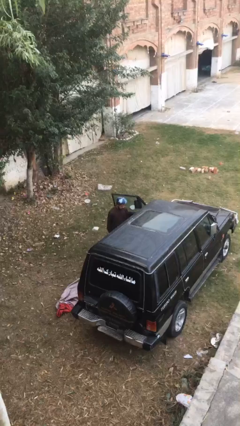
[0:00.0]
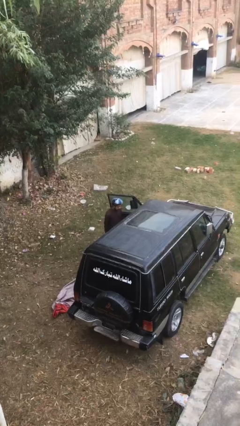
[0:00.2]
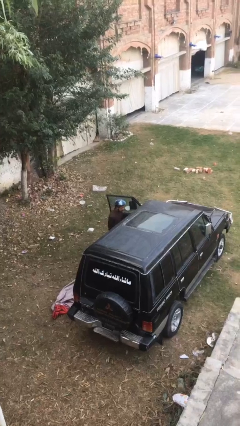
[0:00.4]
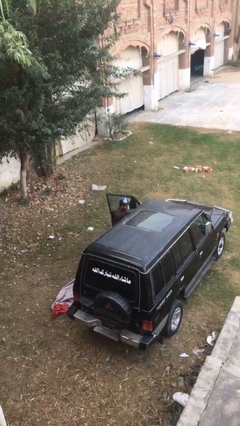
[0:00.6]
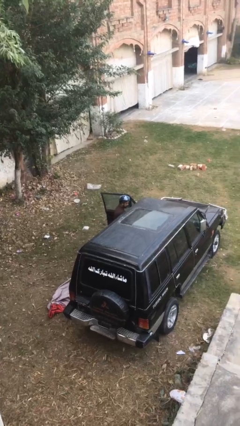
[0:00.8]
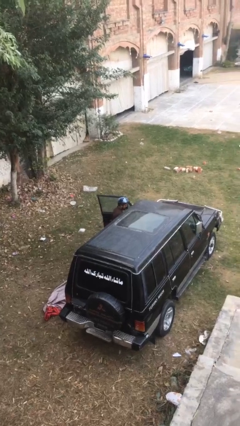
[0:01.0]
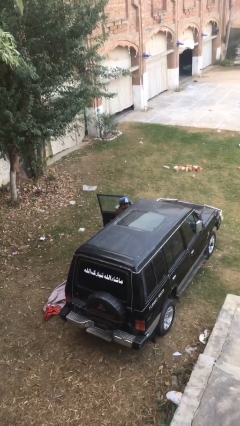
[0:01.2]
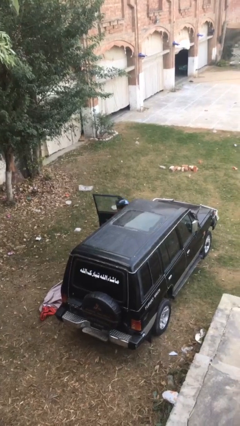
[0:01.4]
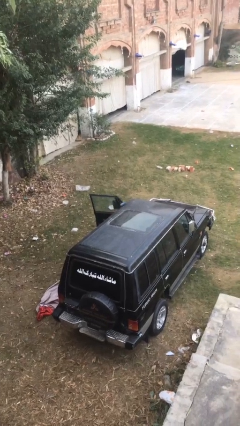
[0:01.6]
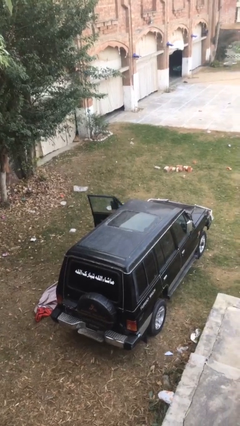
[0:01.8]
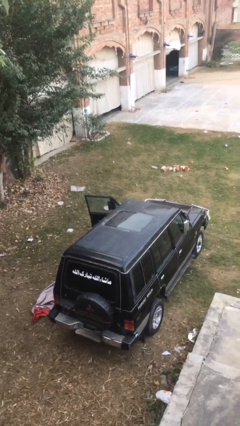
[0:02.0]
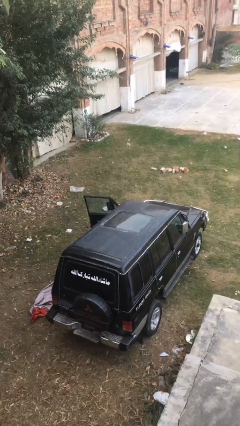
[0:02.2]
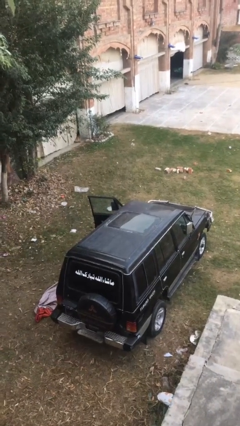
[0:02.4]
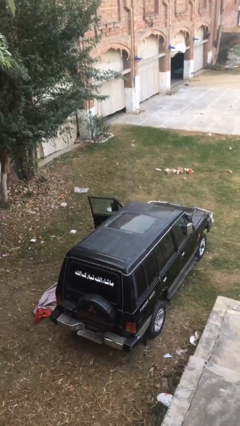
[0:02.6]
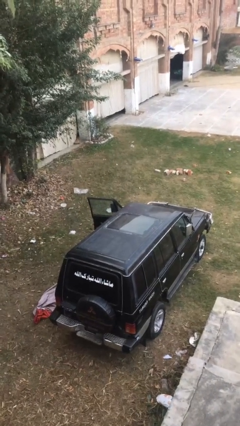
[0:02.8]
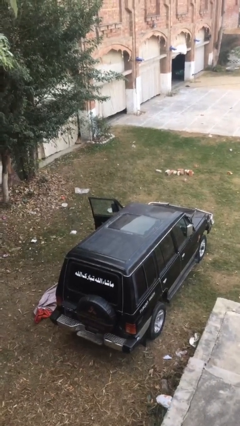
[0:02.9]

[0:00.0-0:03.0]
person enters car

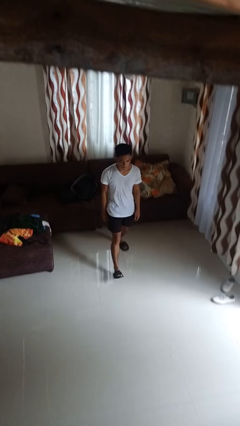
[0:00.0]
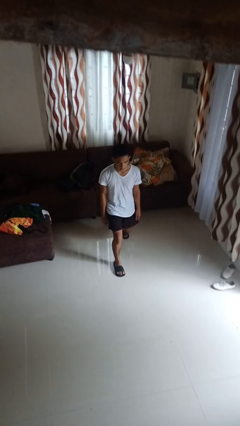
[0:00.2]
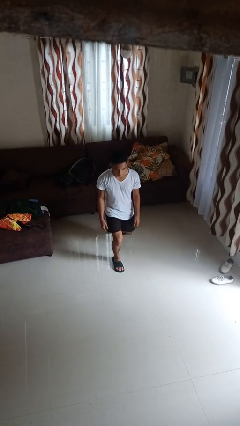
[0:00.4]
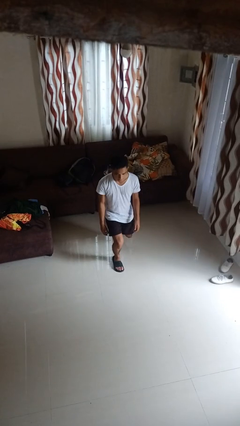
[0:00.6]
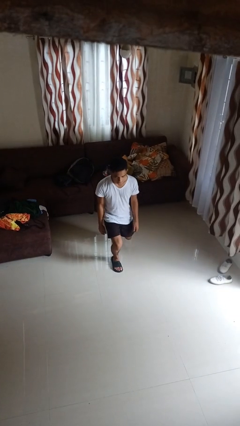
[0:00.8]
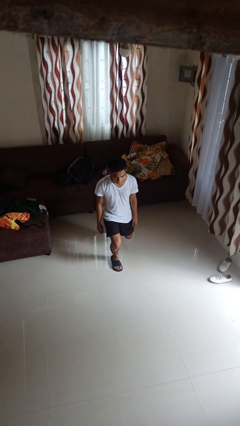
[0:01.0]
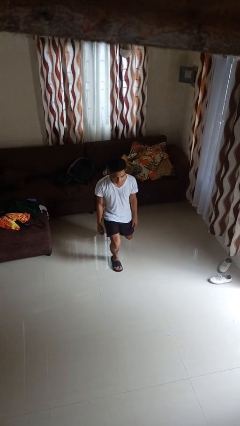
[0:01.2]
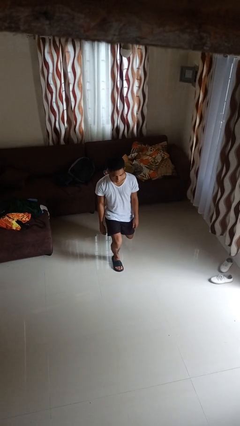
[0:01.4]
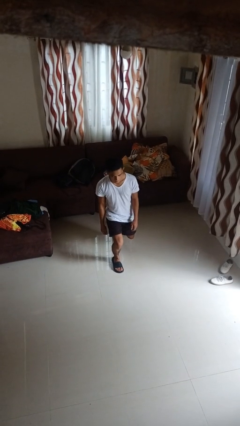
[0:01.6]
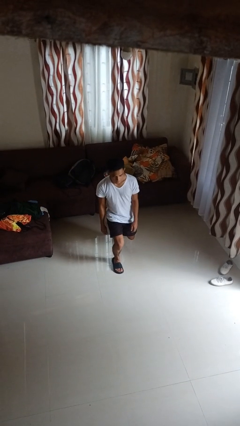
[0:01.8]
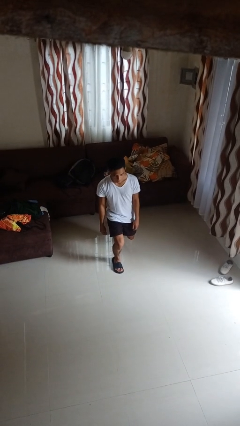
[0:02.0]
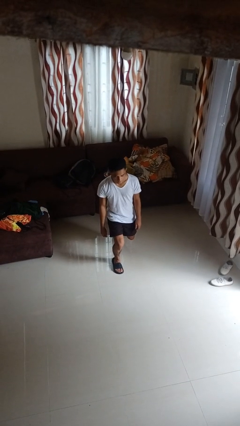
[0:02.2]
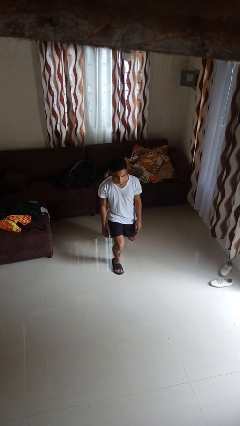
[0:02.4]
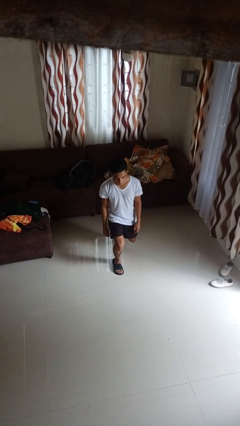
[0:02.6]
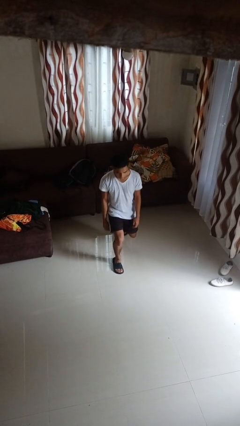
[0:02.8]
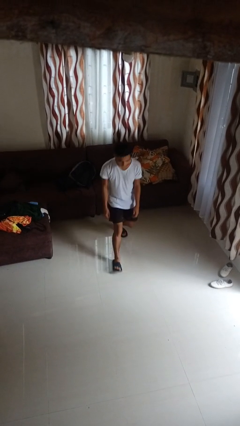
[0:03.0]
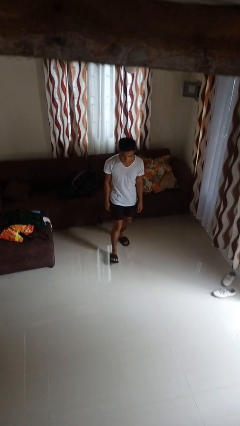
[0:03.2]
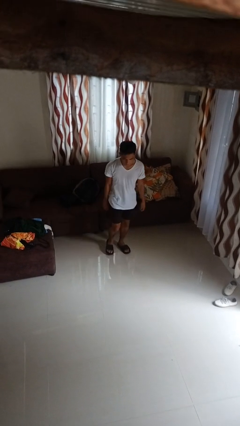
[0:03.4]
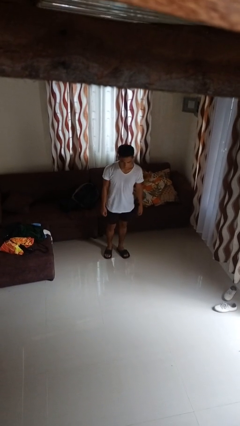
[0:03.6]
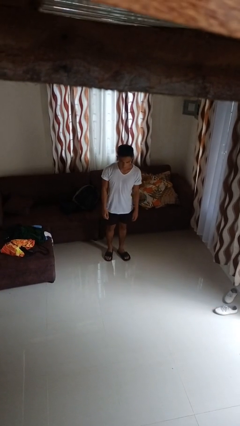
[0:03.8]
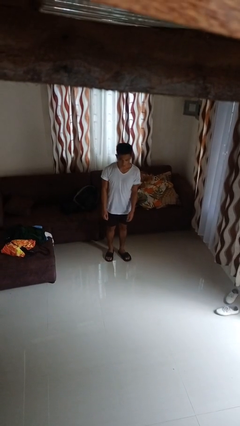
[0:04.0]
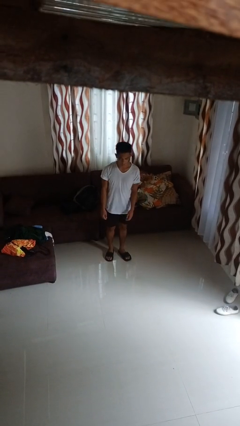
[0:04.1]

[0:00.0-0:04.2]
person exercises with lunges

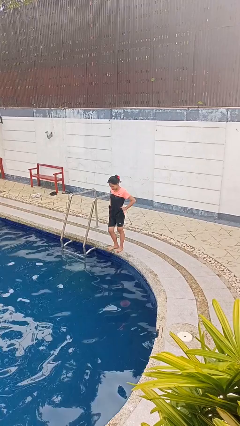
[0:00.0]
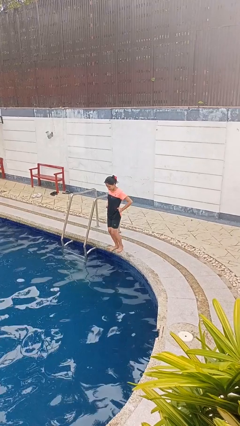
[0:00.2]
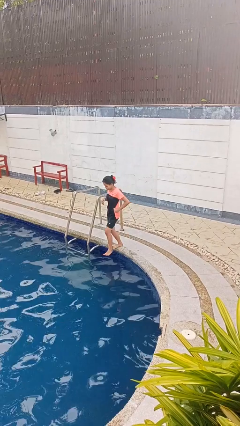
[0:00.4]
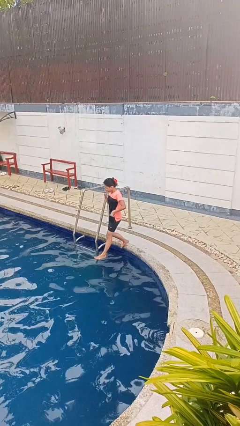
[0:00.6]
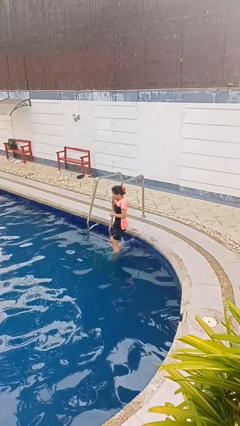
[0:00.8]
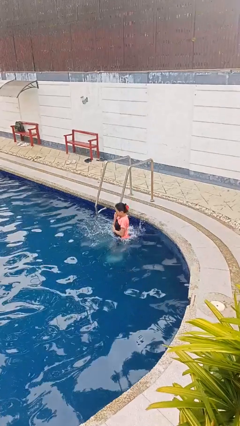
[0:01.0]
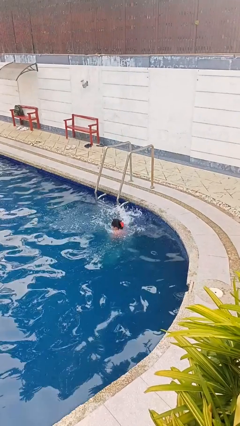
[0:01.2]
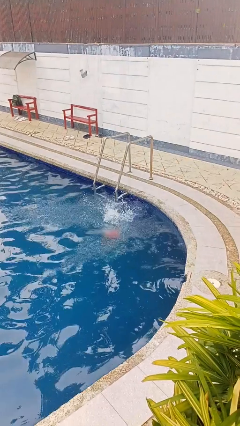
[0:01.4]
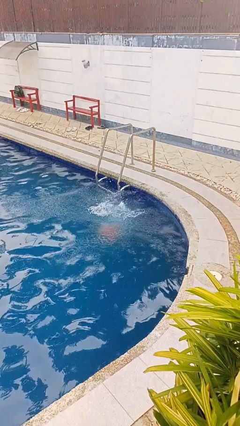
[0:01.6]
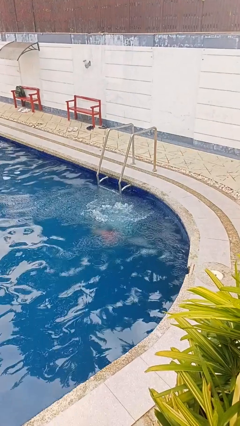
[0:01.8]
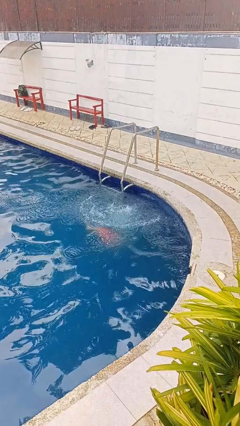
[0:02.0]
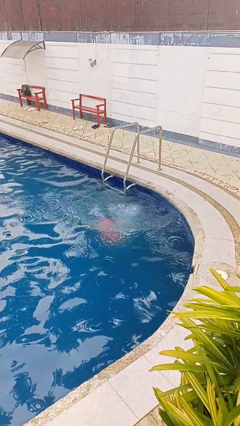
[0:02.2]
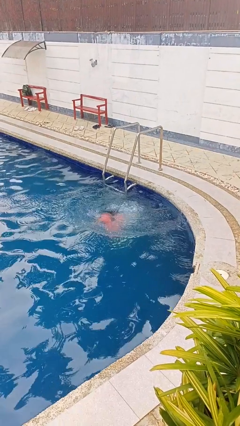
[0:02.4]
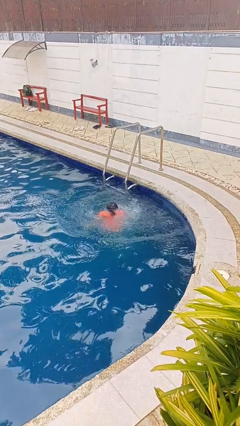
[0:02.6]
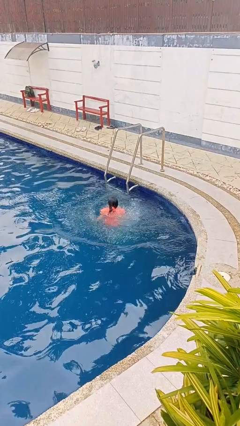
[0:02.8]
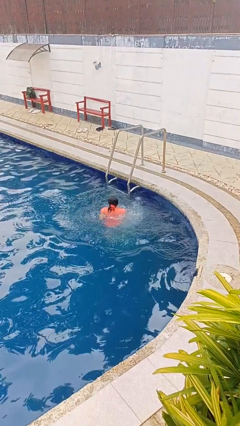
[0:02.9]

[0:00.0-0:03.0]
person jumps into pool

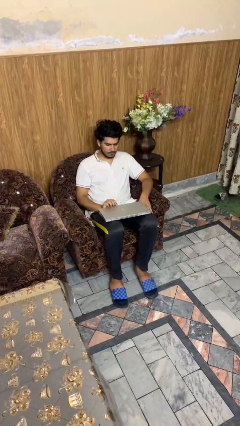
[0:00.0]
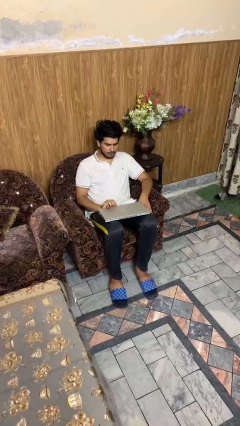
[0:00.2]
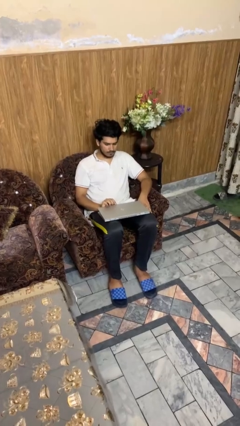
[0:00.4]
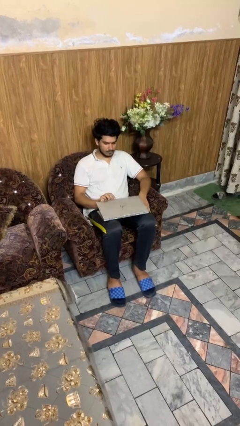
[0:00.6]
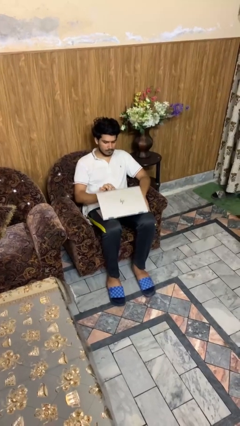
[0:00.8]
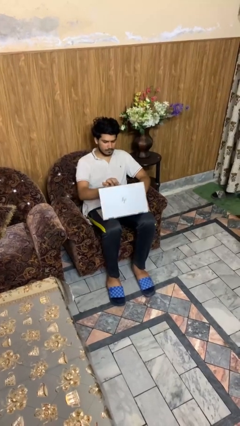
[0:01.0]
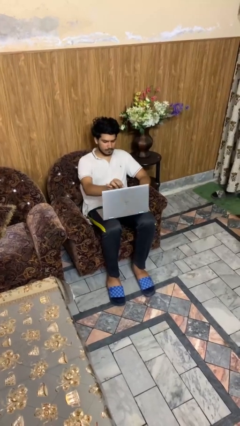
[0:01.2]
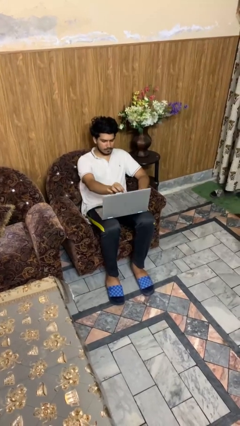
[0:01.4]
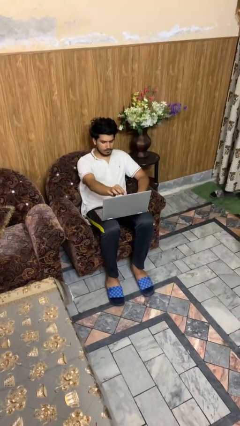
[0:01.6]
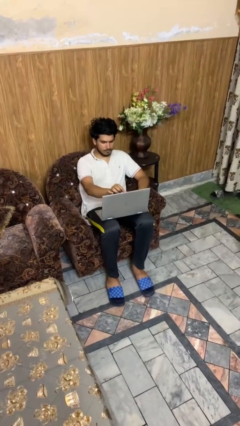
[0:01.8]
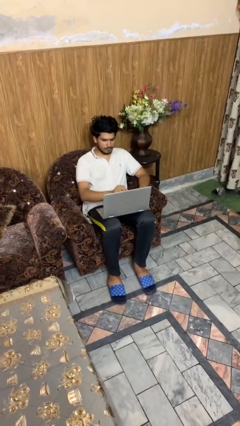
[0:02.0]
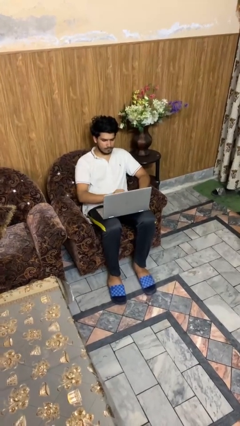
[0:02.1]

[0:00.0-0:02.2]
person opens laptop

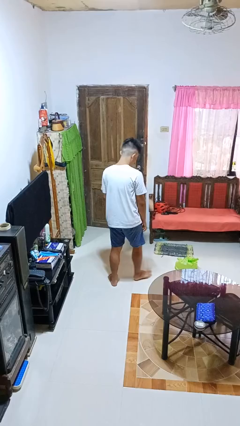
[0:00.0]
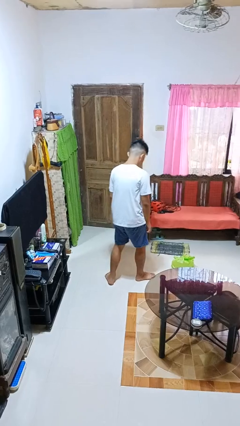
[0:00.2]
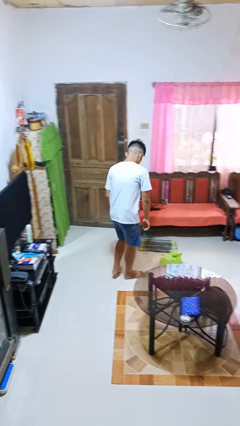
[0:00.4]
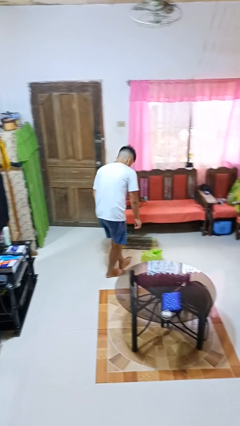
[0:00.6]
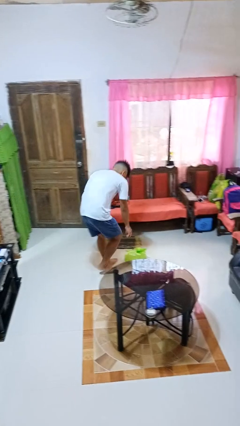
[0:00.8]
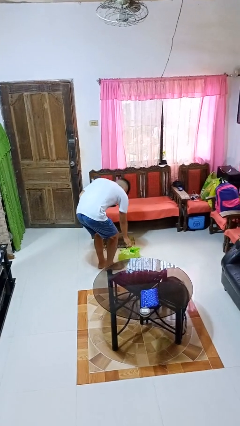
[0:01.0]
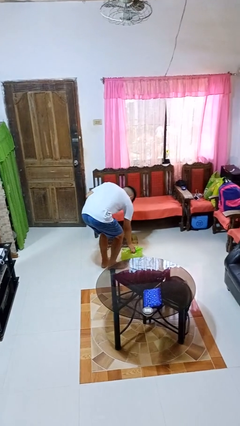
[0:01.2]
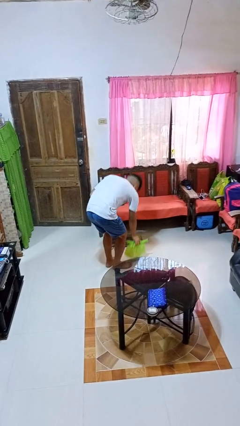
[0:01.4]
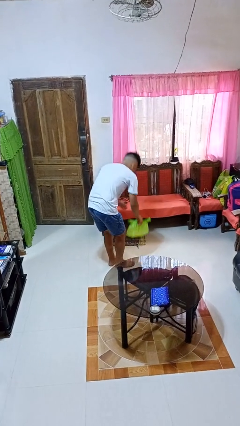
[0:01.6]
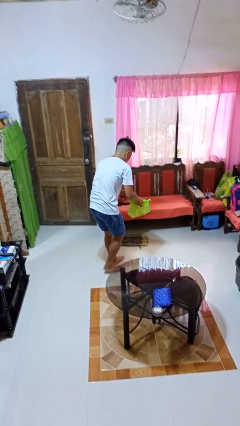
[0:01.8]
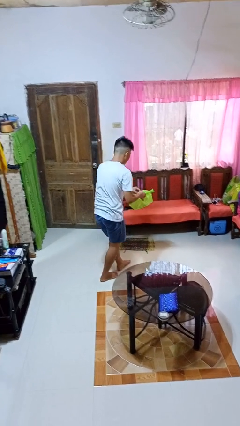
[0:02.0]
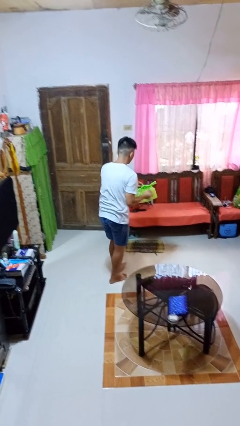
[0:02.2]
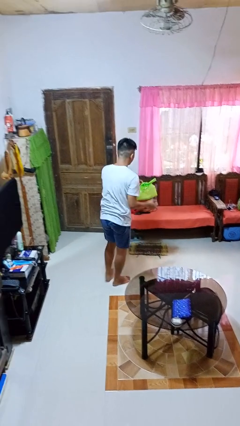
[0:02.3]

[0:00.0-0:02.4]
person picks up object from floor

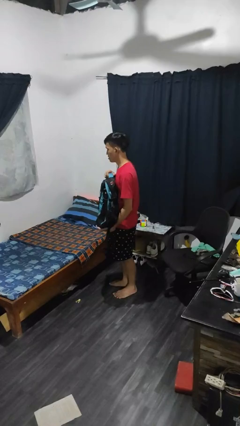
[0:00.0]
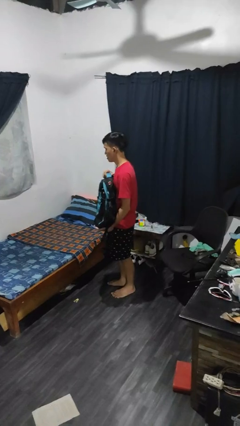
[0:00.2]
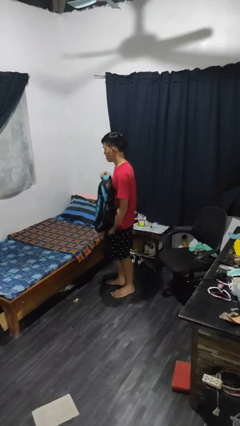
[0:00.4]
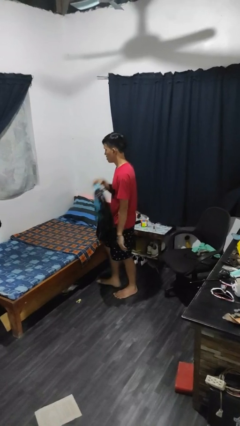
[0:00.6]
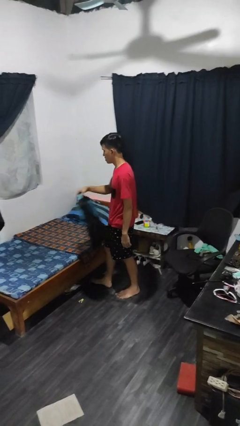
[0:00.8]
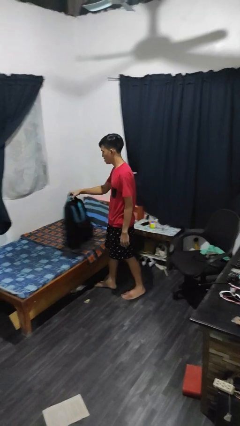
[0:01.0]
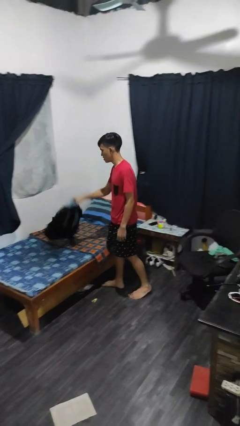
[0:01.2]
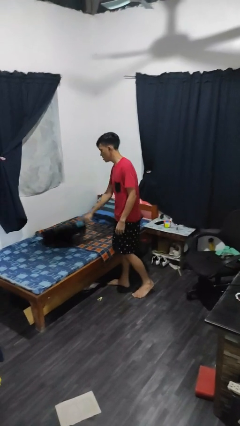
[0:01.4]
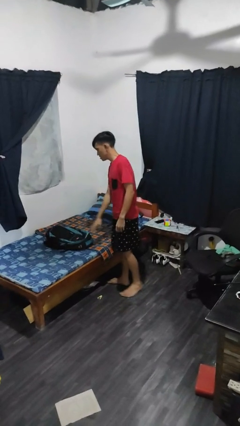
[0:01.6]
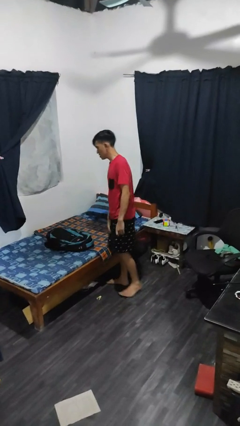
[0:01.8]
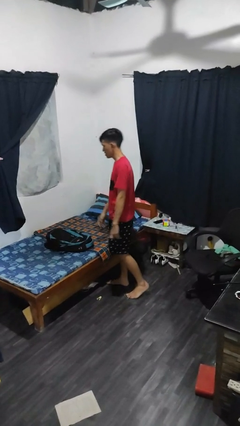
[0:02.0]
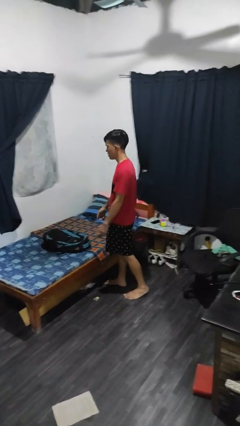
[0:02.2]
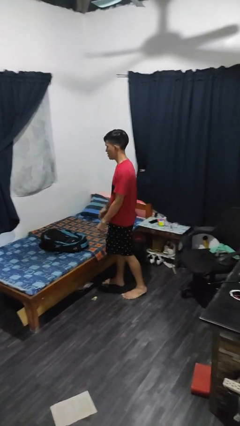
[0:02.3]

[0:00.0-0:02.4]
person puts down object on bed

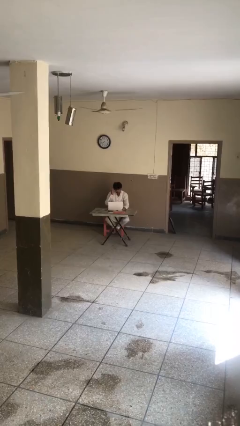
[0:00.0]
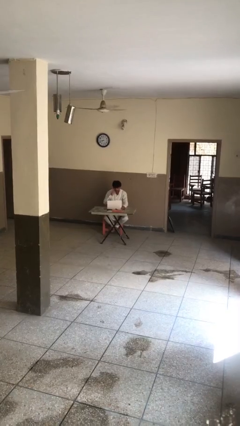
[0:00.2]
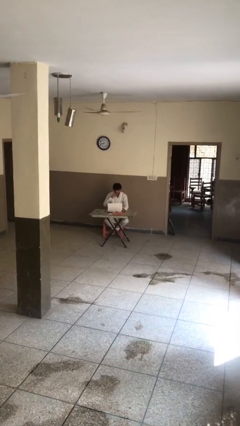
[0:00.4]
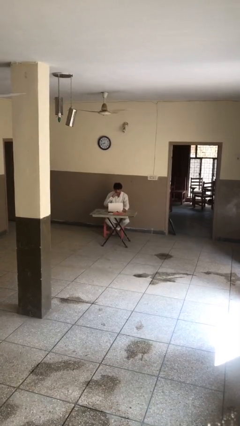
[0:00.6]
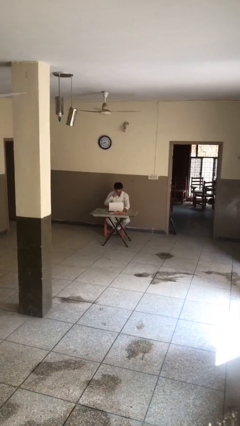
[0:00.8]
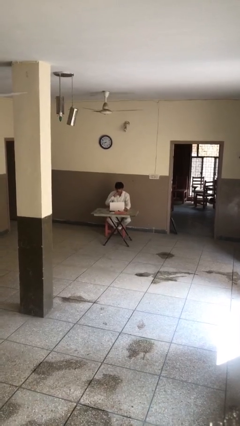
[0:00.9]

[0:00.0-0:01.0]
person interacts with laptop
